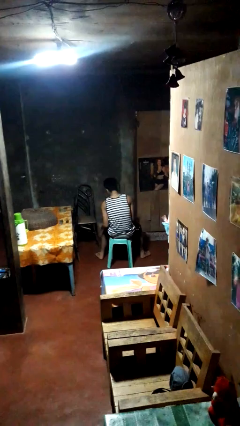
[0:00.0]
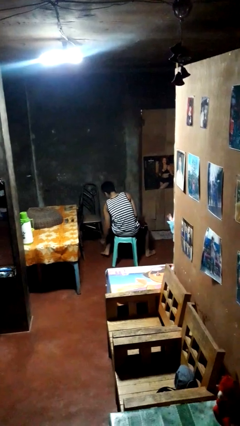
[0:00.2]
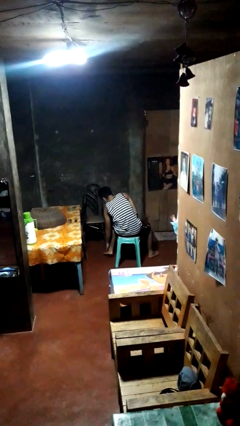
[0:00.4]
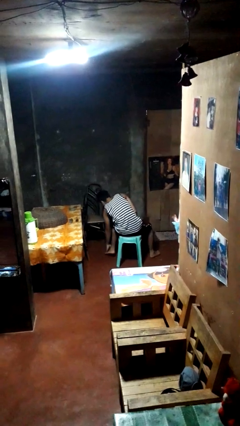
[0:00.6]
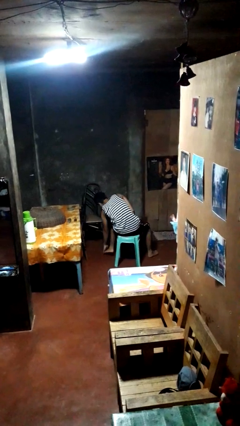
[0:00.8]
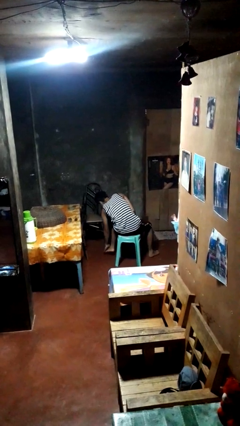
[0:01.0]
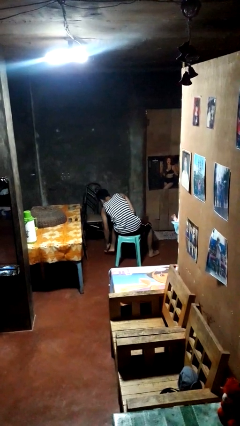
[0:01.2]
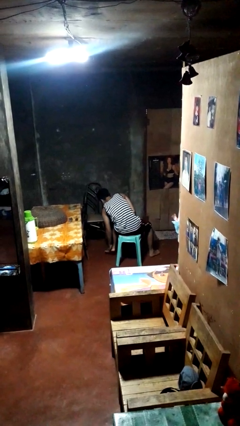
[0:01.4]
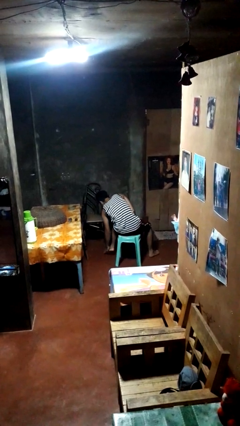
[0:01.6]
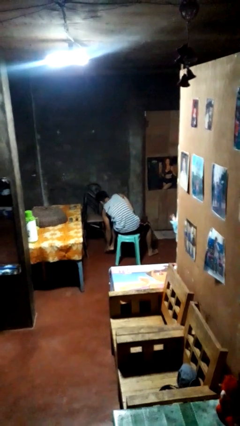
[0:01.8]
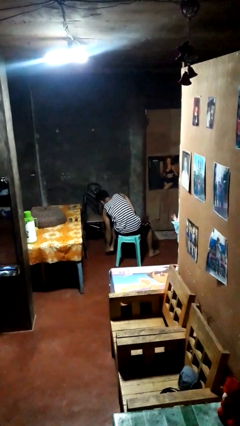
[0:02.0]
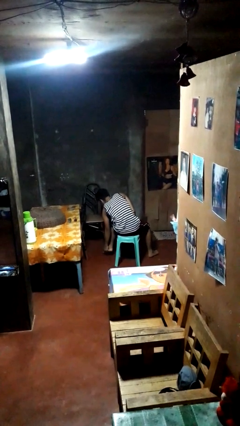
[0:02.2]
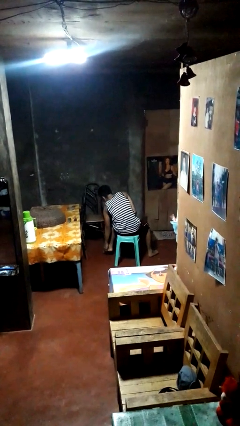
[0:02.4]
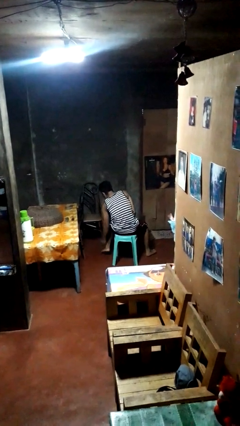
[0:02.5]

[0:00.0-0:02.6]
person rubs foot

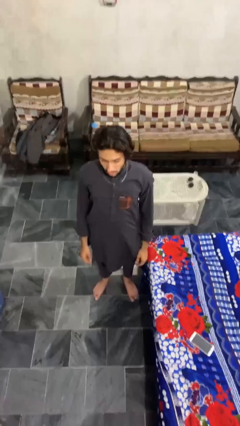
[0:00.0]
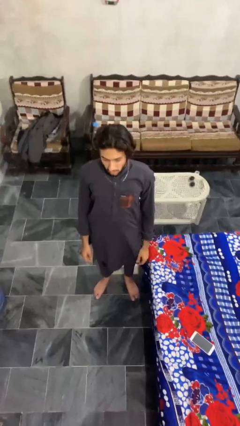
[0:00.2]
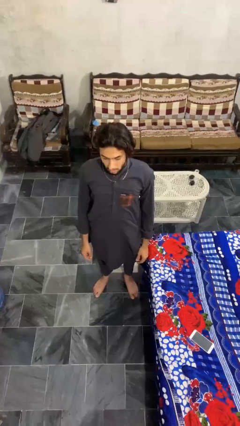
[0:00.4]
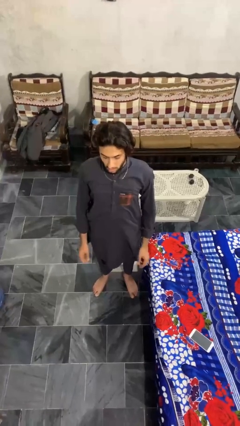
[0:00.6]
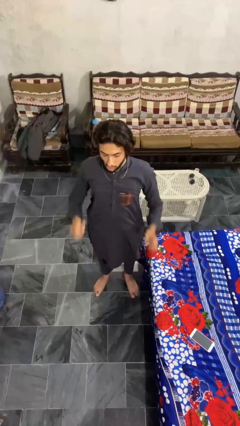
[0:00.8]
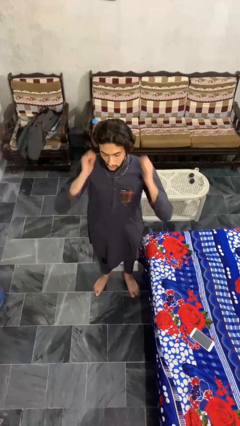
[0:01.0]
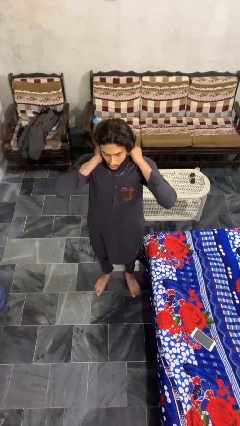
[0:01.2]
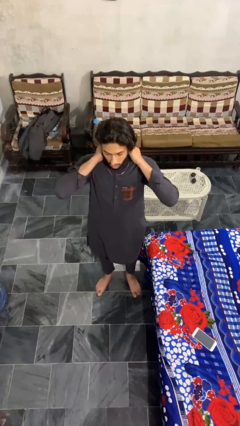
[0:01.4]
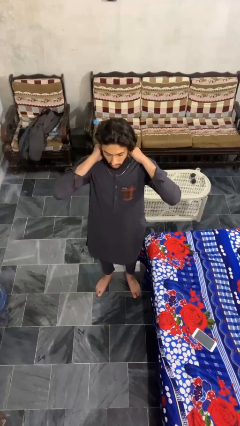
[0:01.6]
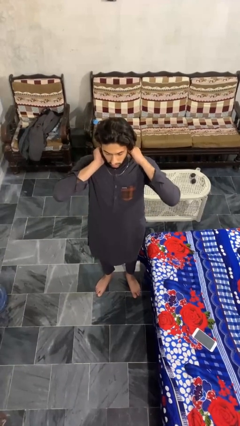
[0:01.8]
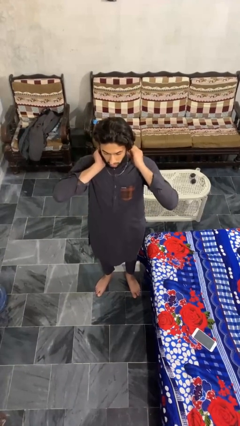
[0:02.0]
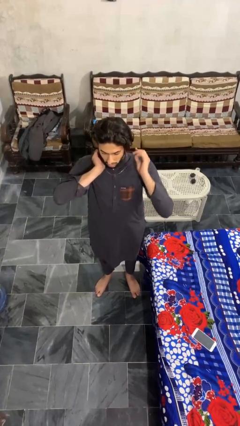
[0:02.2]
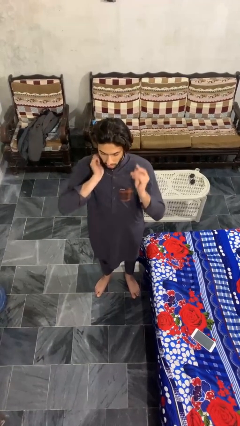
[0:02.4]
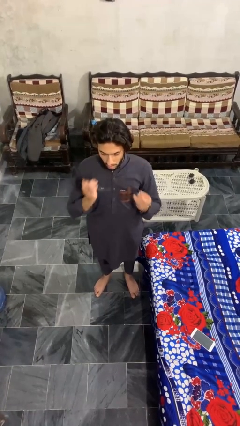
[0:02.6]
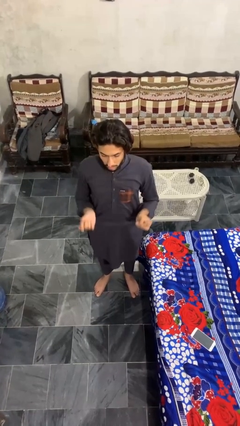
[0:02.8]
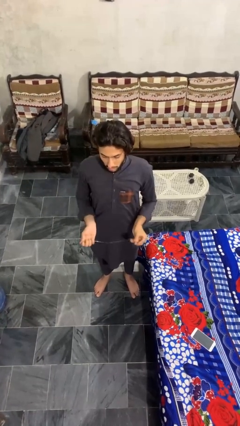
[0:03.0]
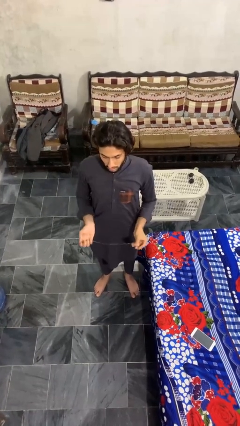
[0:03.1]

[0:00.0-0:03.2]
person takes off necklace

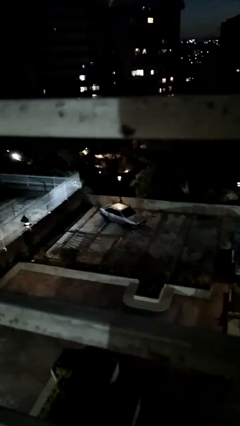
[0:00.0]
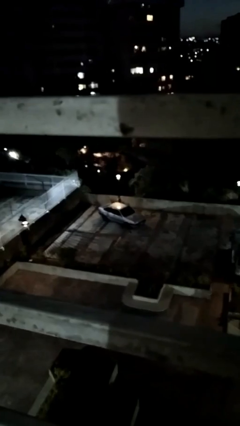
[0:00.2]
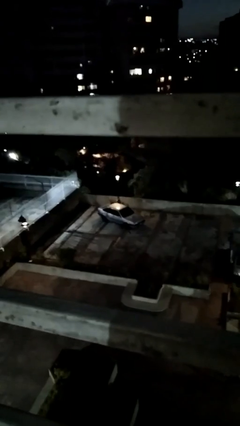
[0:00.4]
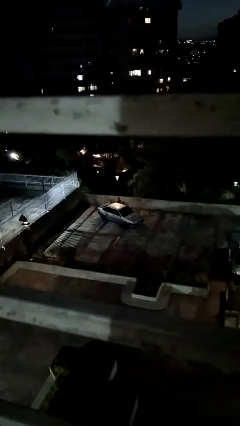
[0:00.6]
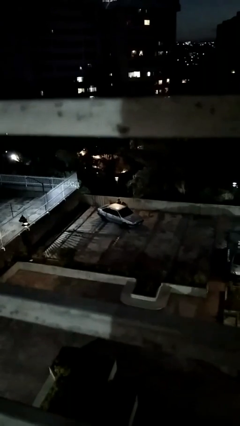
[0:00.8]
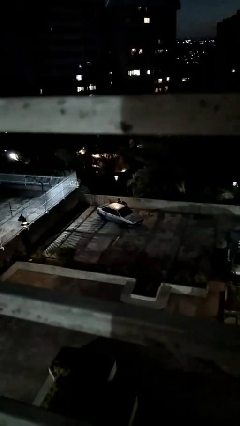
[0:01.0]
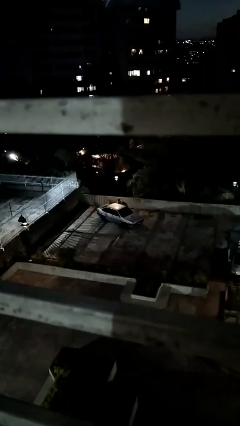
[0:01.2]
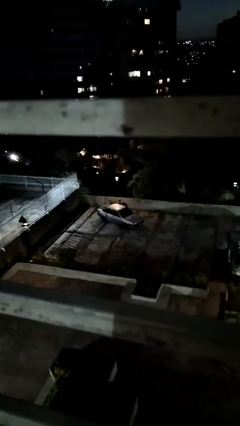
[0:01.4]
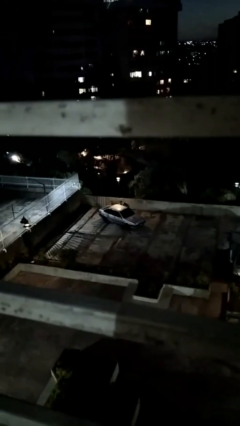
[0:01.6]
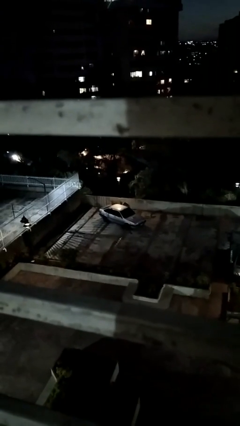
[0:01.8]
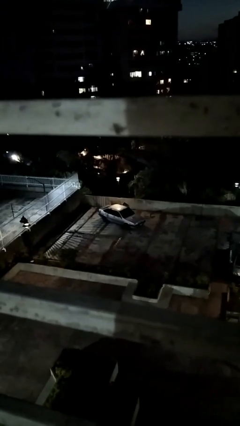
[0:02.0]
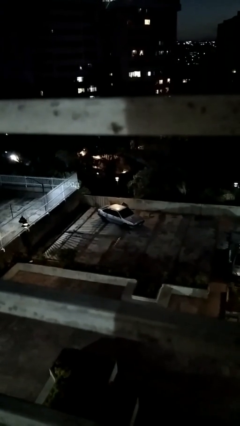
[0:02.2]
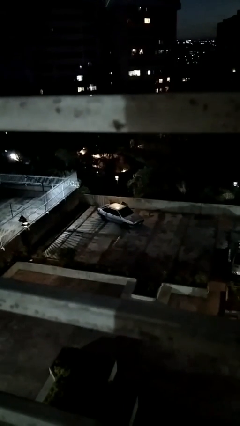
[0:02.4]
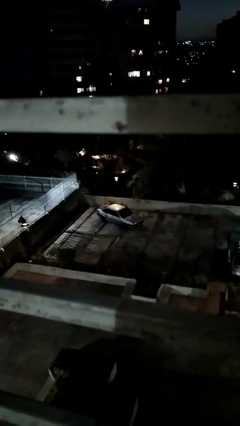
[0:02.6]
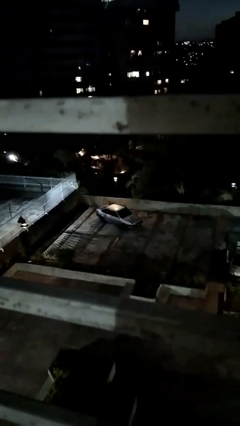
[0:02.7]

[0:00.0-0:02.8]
car picks up person

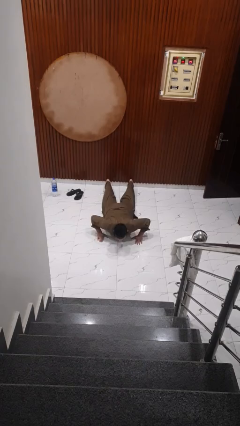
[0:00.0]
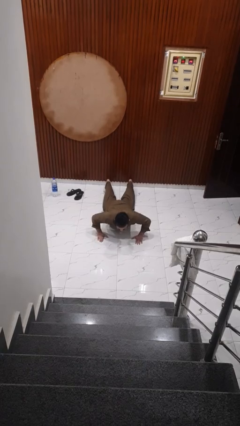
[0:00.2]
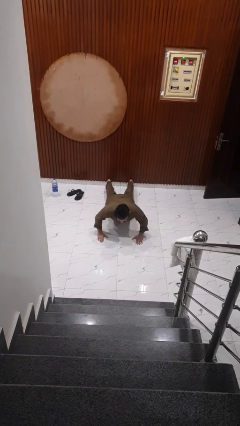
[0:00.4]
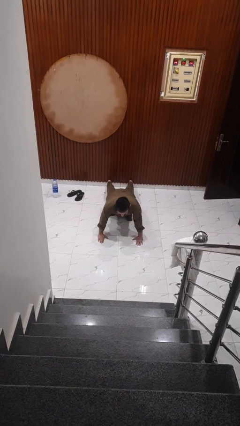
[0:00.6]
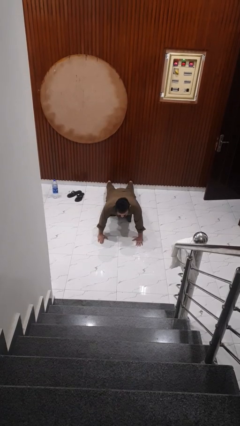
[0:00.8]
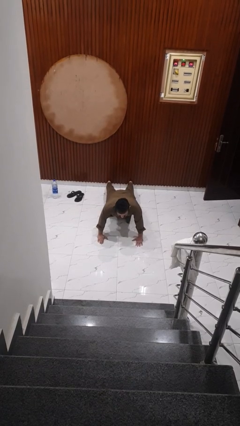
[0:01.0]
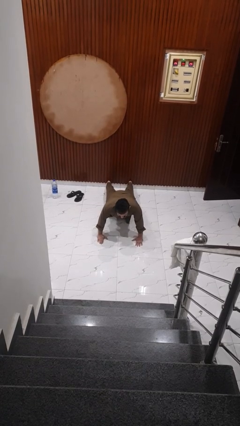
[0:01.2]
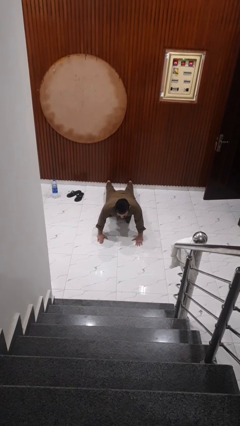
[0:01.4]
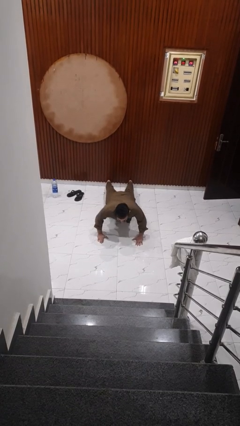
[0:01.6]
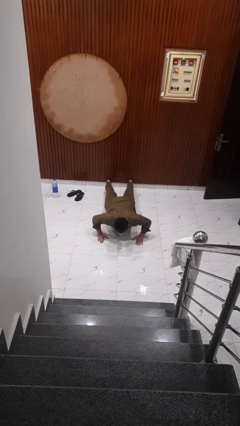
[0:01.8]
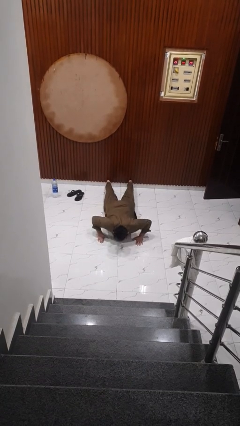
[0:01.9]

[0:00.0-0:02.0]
person exercises with pushup

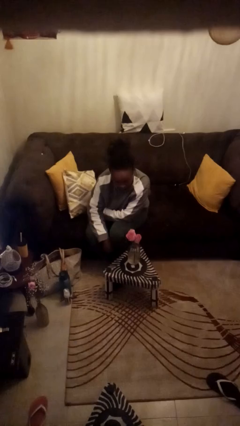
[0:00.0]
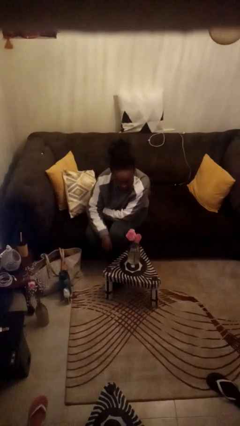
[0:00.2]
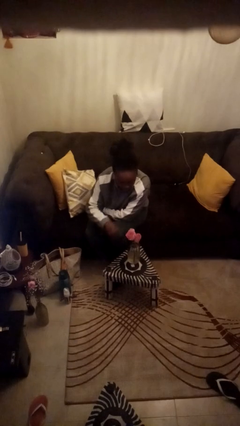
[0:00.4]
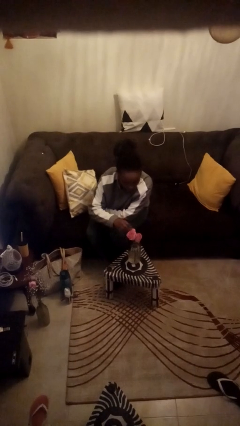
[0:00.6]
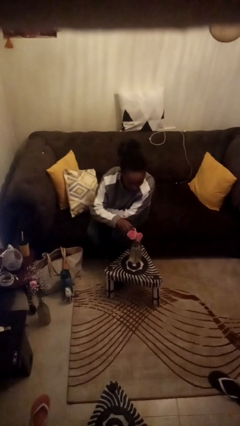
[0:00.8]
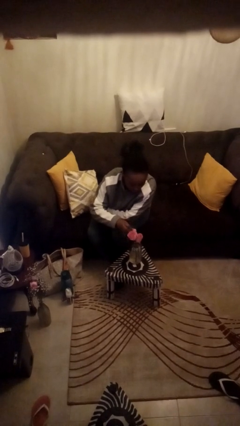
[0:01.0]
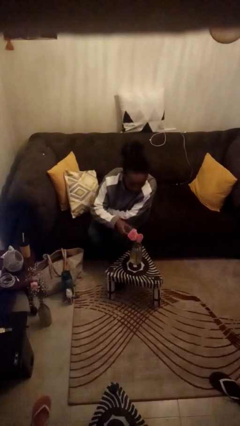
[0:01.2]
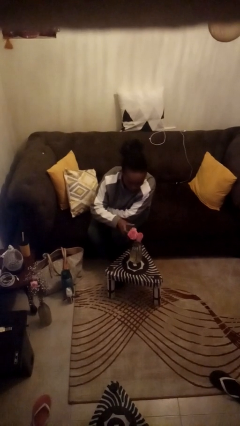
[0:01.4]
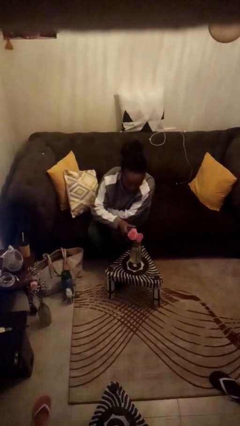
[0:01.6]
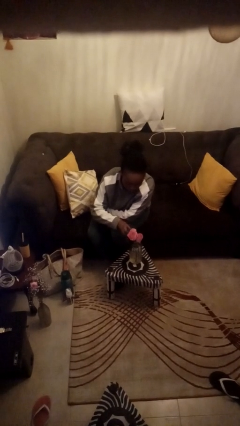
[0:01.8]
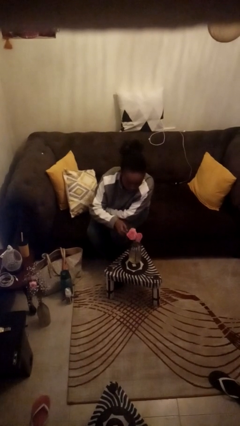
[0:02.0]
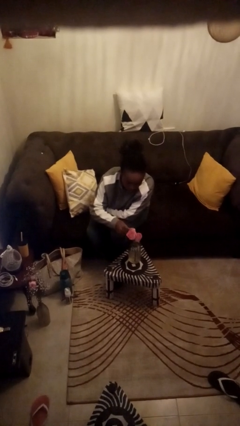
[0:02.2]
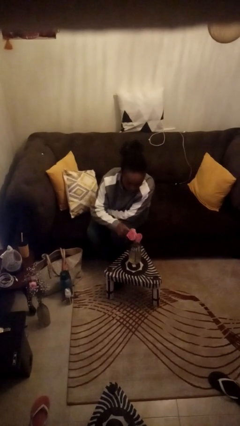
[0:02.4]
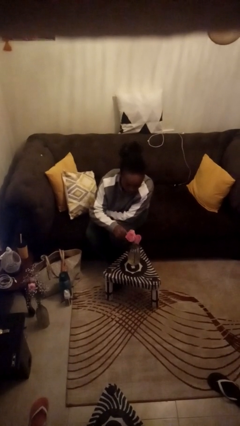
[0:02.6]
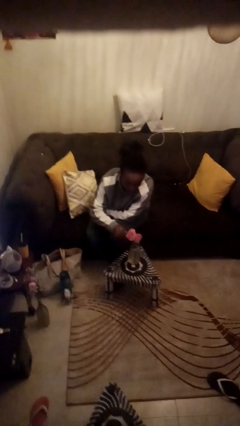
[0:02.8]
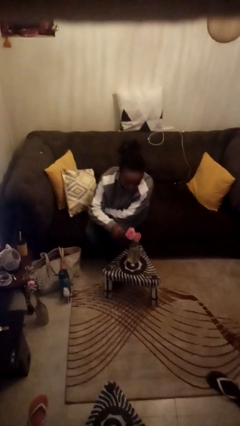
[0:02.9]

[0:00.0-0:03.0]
person arranges flowers in vase

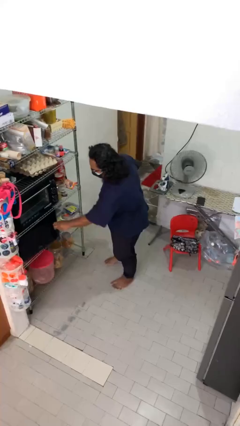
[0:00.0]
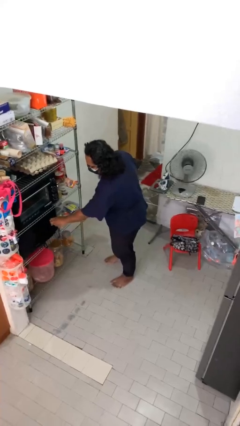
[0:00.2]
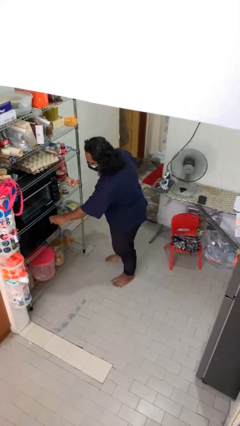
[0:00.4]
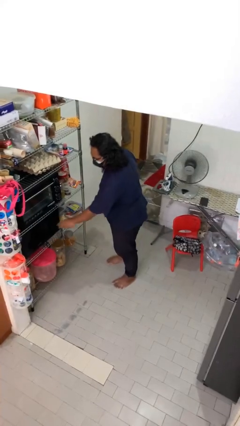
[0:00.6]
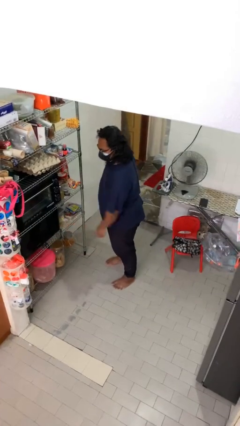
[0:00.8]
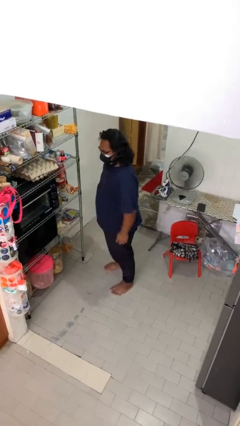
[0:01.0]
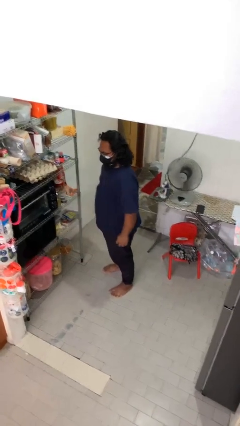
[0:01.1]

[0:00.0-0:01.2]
person closes microwave

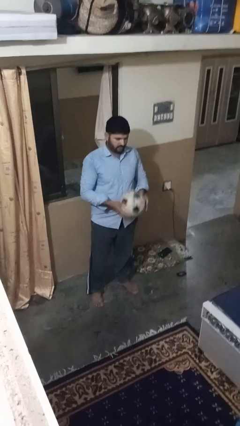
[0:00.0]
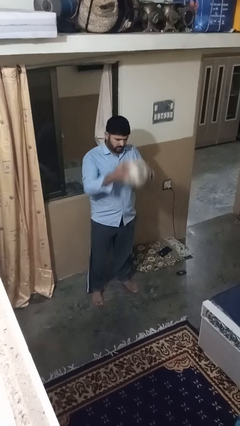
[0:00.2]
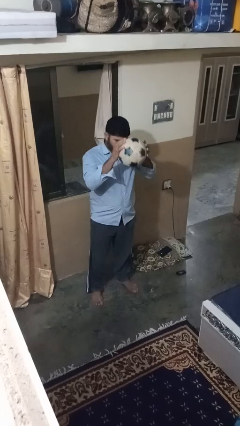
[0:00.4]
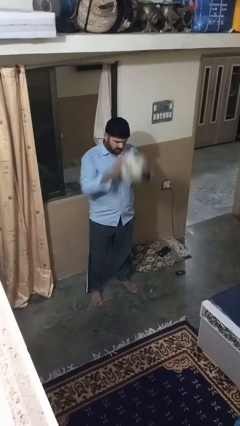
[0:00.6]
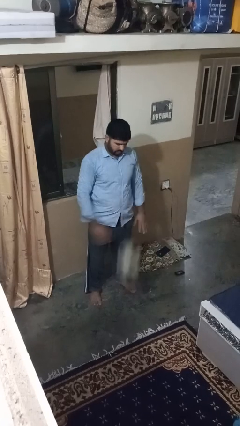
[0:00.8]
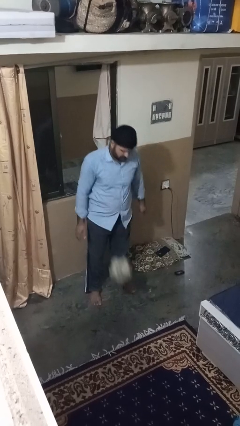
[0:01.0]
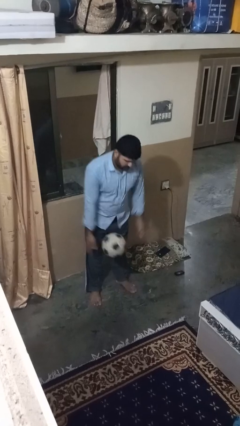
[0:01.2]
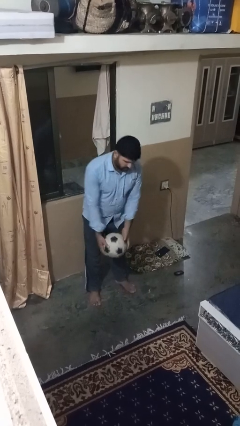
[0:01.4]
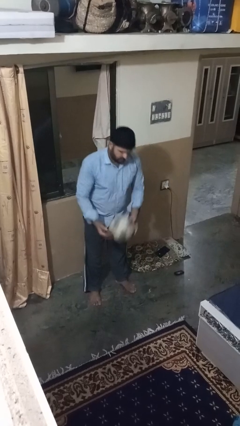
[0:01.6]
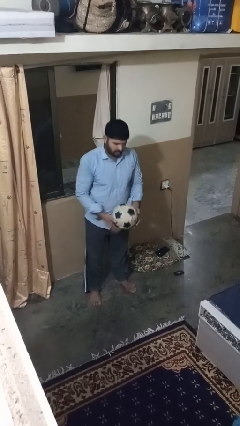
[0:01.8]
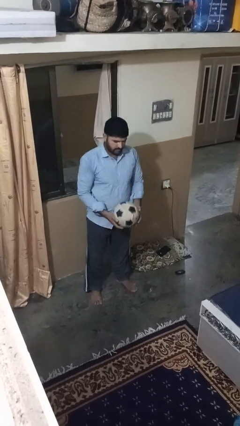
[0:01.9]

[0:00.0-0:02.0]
person bounces ball on floor
